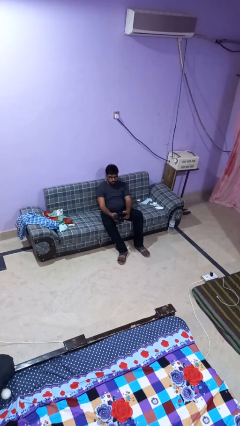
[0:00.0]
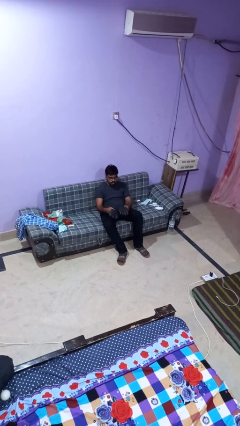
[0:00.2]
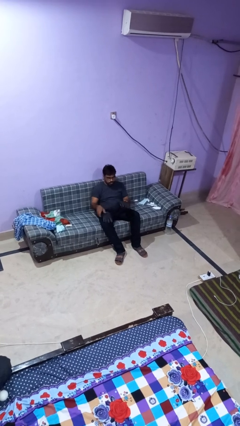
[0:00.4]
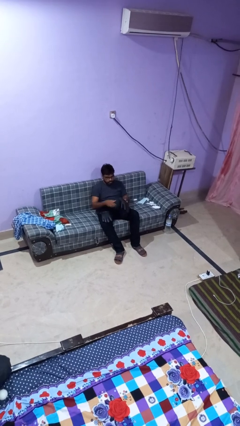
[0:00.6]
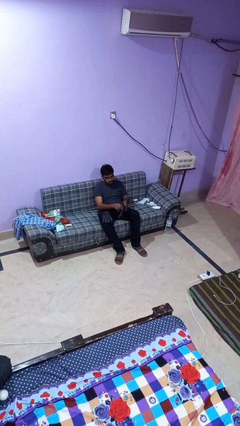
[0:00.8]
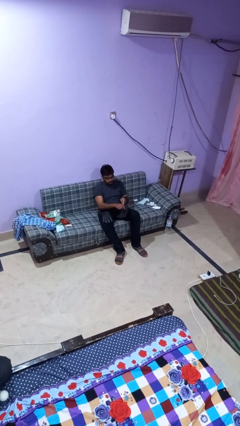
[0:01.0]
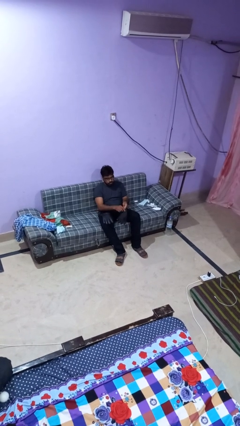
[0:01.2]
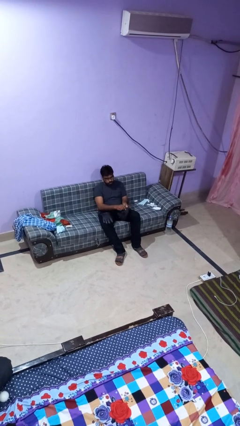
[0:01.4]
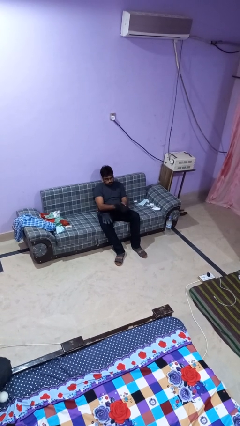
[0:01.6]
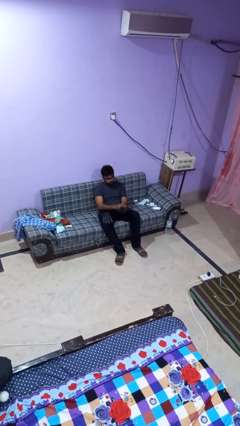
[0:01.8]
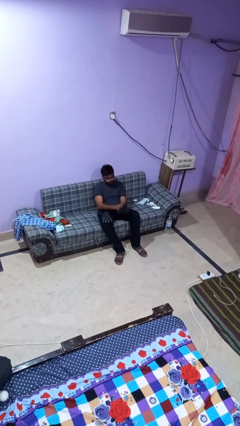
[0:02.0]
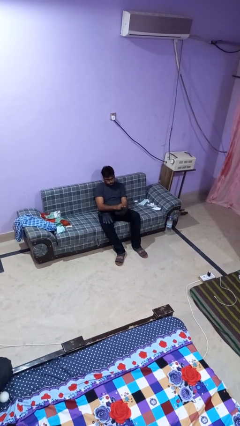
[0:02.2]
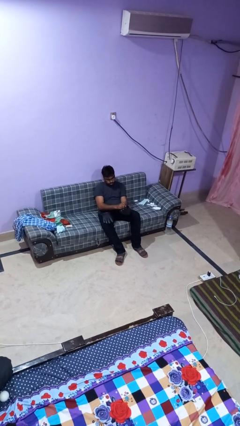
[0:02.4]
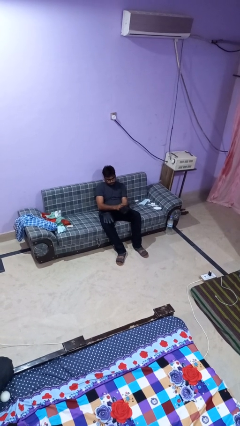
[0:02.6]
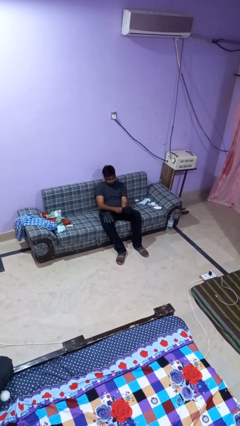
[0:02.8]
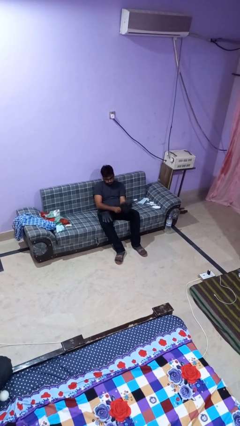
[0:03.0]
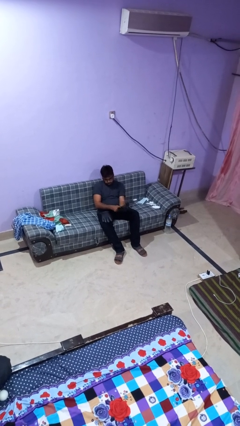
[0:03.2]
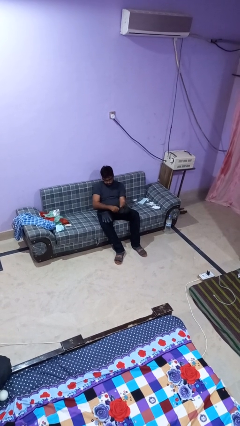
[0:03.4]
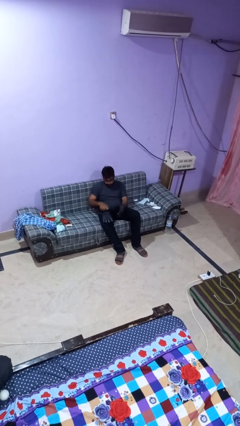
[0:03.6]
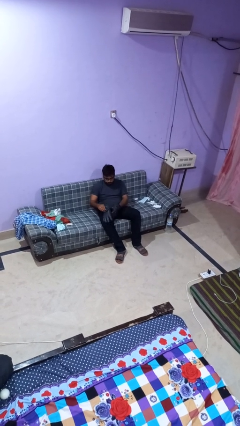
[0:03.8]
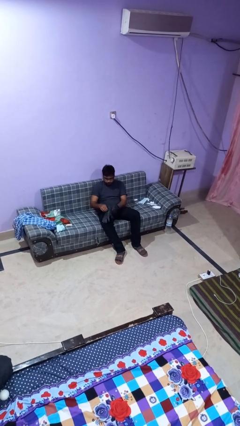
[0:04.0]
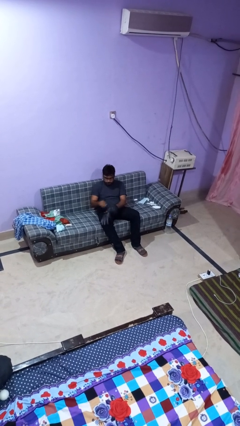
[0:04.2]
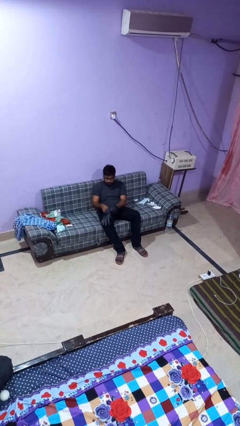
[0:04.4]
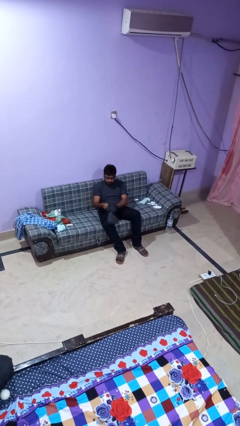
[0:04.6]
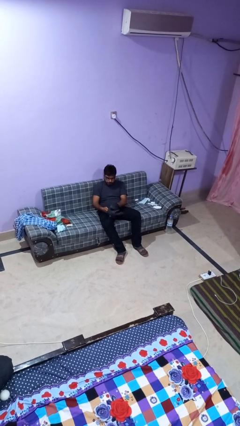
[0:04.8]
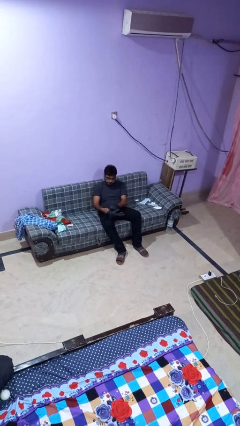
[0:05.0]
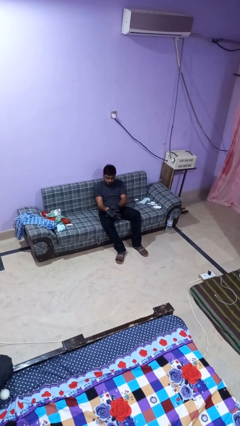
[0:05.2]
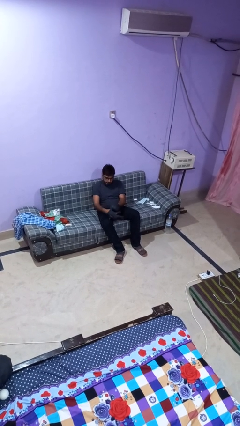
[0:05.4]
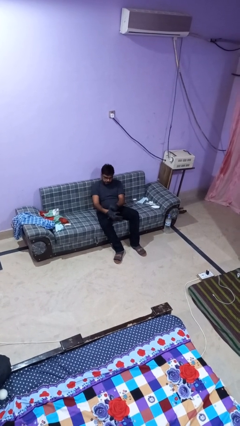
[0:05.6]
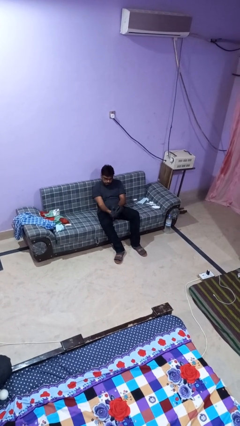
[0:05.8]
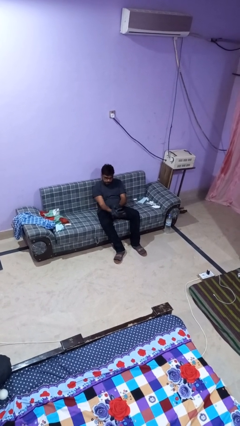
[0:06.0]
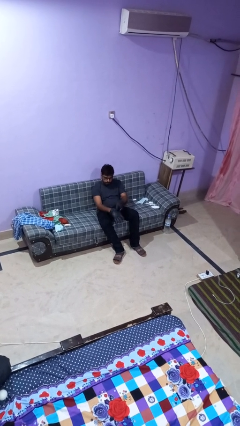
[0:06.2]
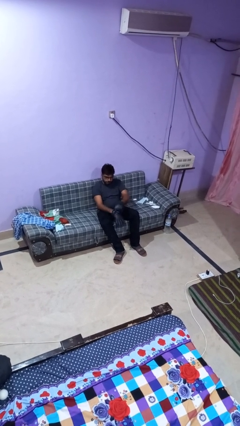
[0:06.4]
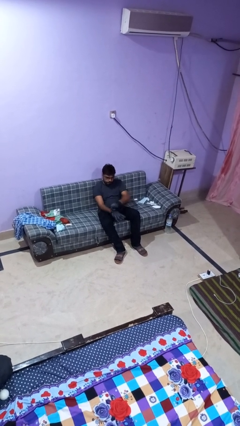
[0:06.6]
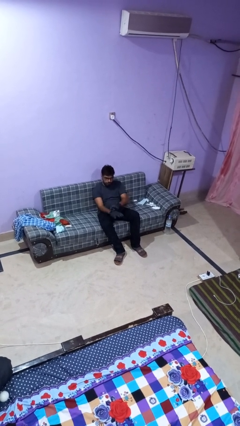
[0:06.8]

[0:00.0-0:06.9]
person puts on gloves

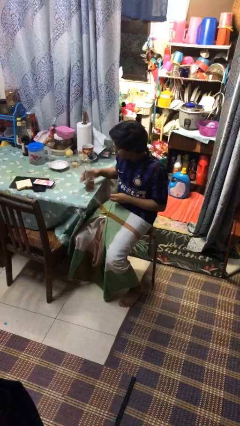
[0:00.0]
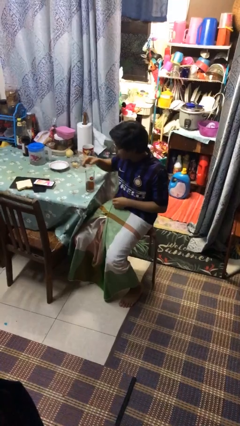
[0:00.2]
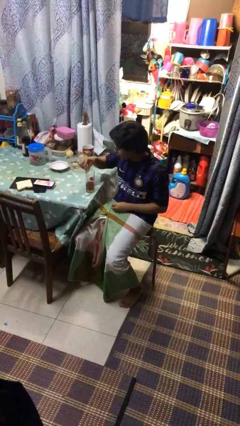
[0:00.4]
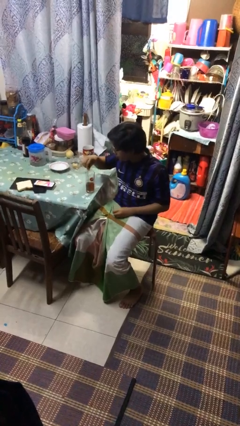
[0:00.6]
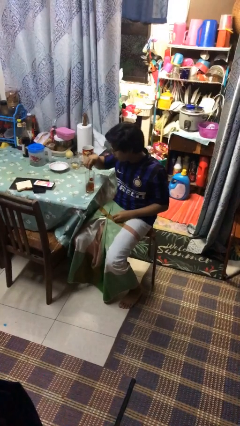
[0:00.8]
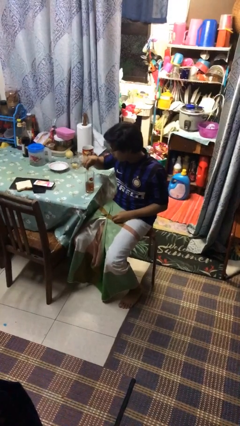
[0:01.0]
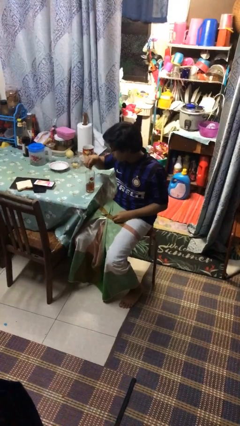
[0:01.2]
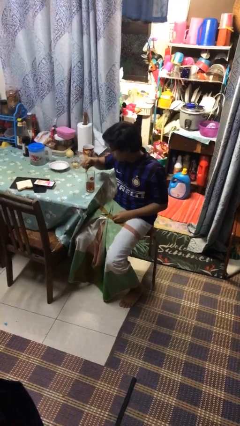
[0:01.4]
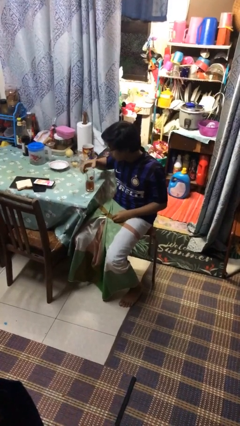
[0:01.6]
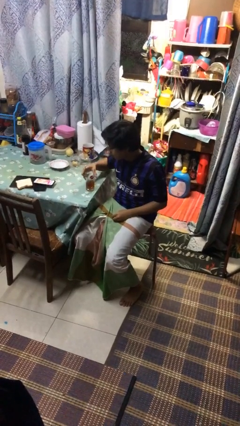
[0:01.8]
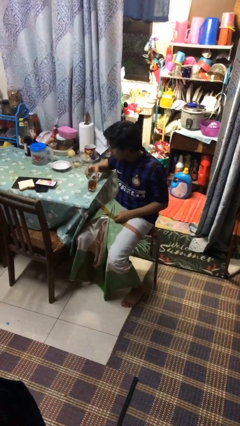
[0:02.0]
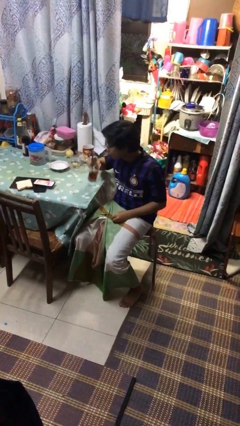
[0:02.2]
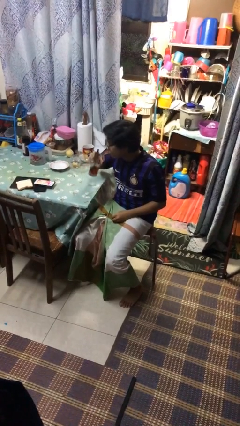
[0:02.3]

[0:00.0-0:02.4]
person stirs mug

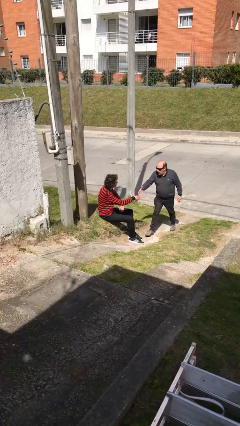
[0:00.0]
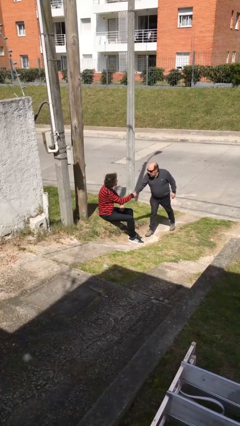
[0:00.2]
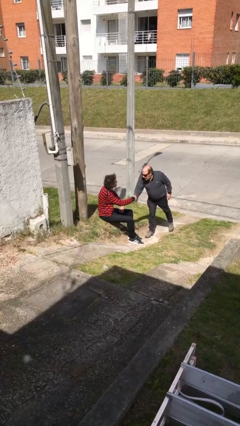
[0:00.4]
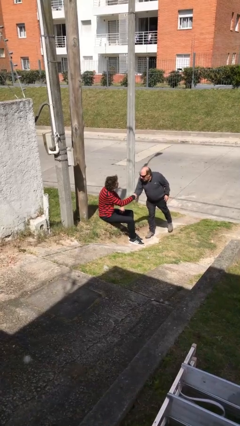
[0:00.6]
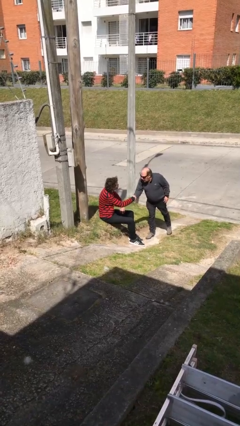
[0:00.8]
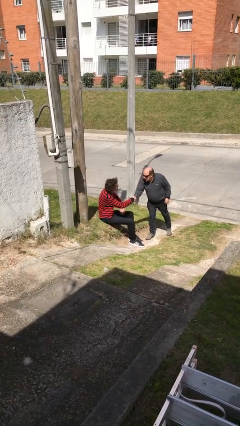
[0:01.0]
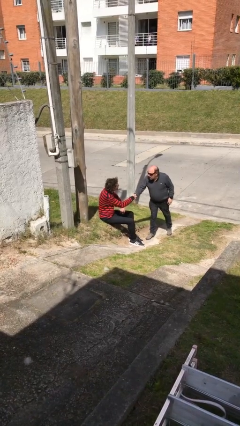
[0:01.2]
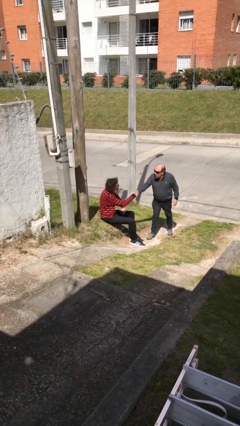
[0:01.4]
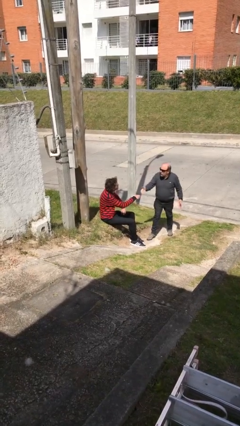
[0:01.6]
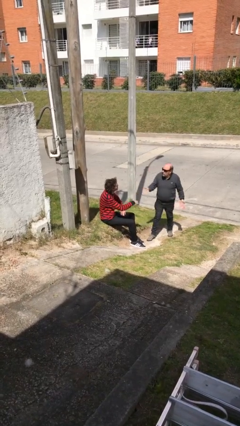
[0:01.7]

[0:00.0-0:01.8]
person shakes hand

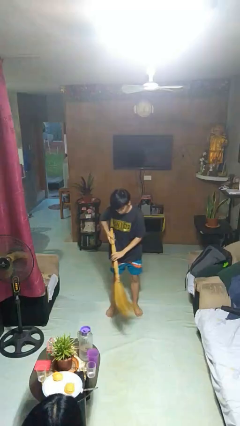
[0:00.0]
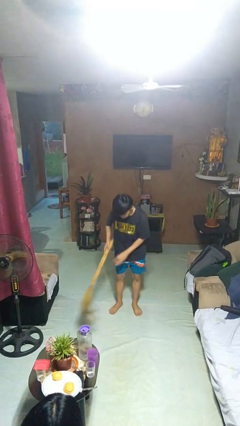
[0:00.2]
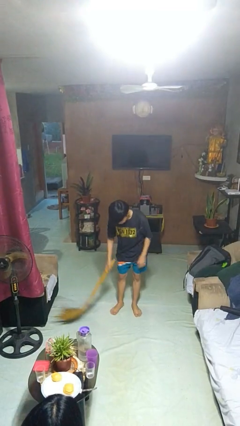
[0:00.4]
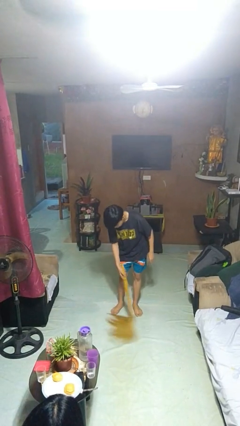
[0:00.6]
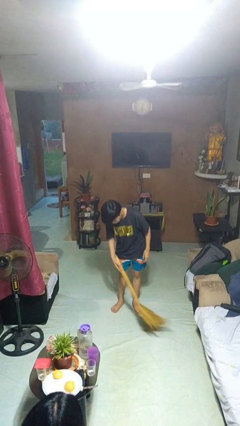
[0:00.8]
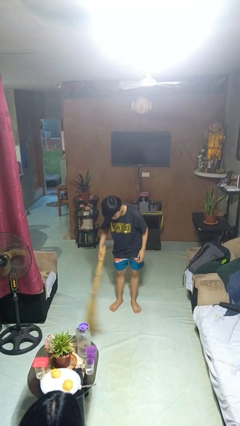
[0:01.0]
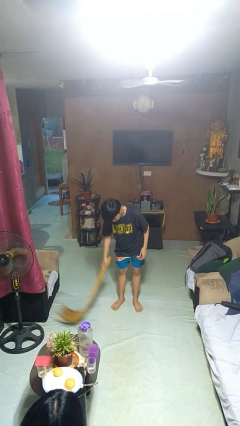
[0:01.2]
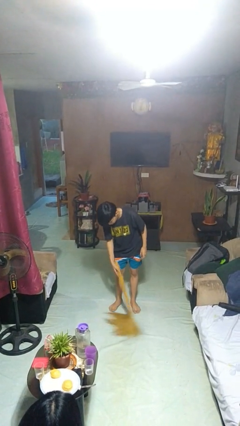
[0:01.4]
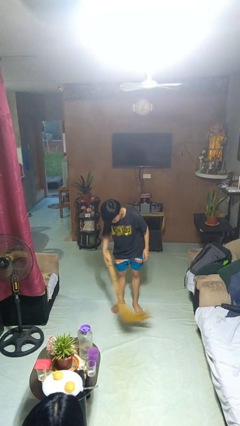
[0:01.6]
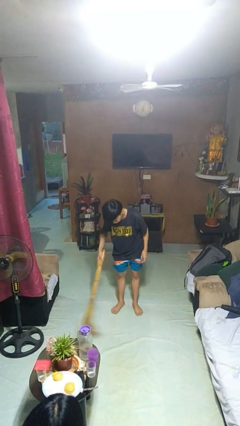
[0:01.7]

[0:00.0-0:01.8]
person sweeps floor

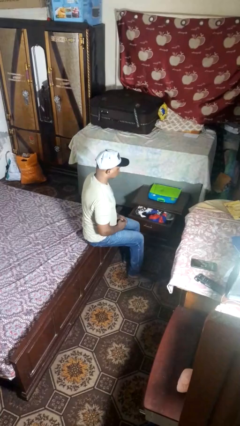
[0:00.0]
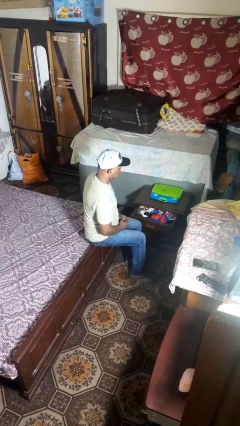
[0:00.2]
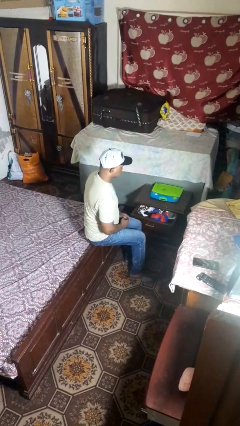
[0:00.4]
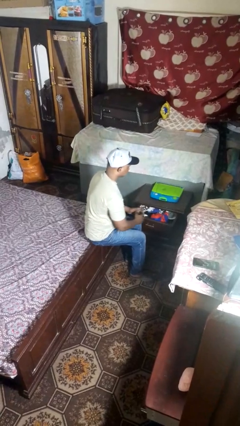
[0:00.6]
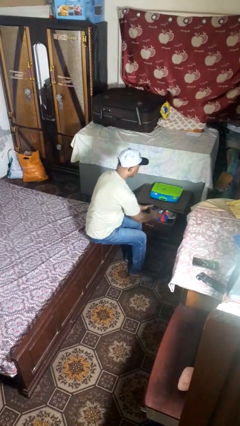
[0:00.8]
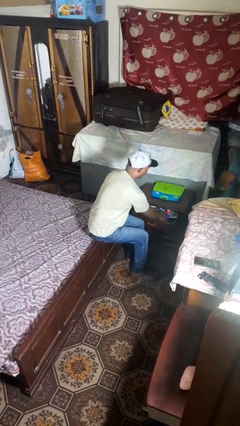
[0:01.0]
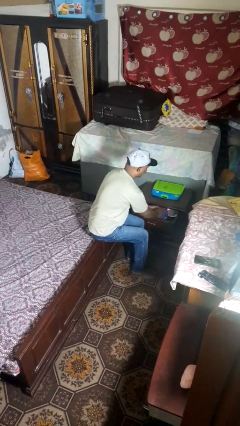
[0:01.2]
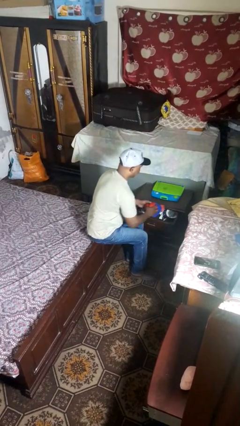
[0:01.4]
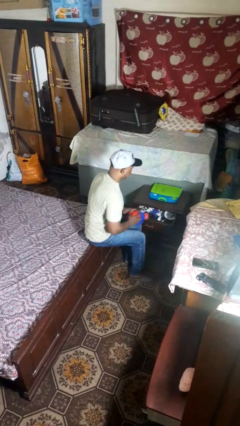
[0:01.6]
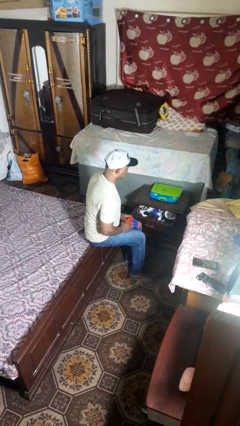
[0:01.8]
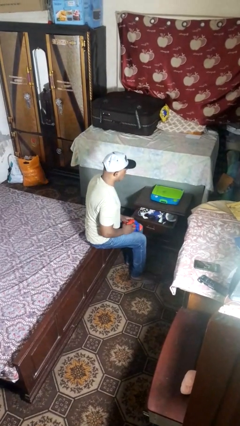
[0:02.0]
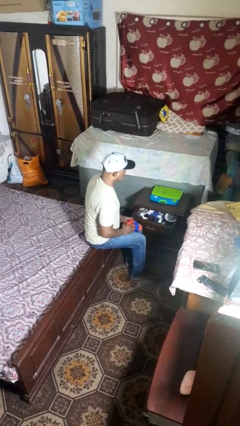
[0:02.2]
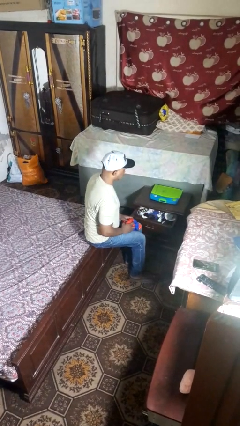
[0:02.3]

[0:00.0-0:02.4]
person takes clothes from dresser

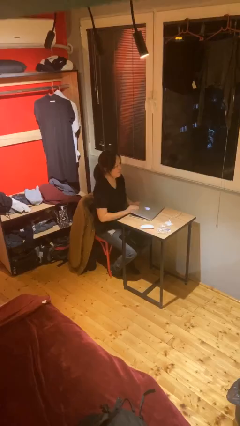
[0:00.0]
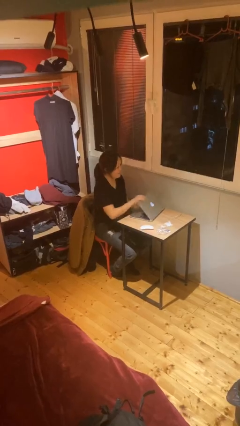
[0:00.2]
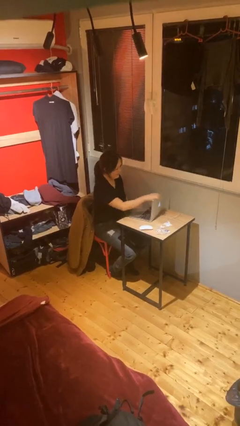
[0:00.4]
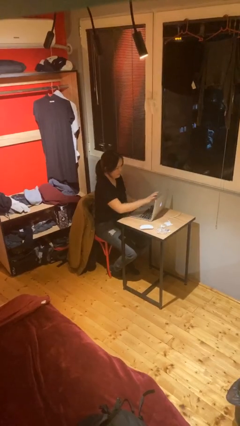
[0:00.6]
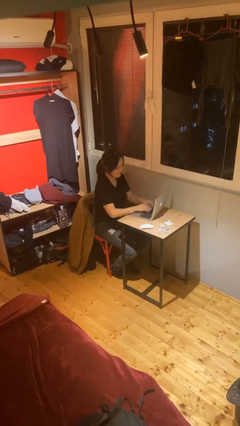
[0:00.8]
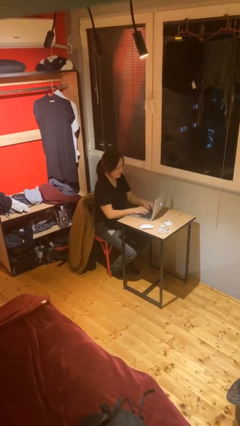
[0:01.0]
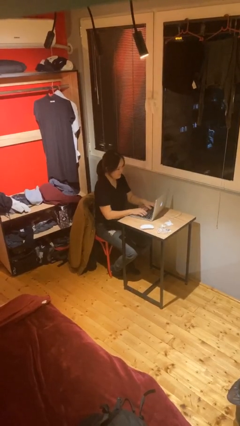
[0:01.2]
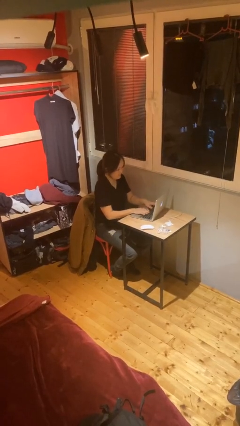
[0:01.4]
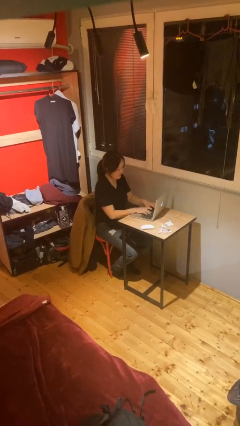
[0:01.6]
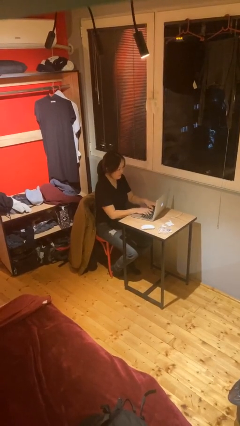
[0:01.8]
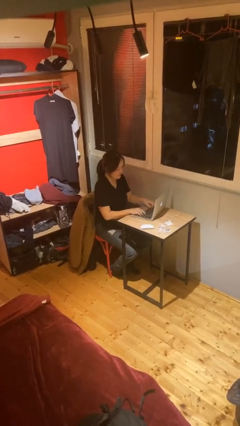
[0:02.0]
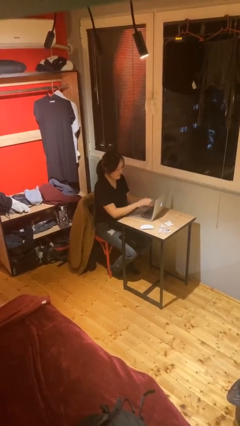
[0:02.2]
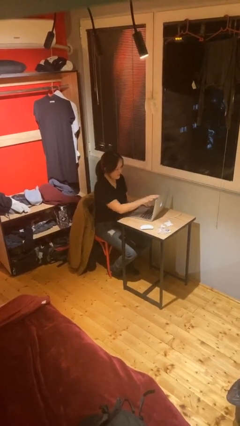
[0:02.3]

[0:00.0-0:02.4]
person interacts with laptop
